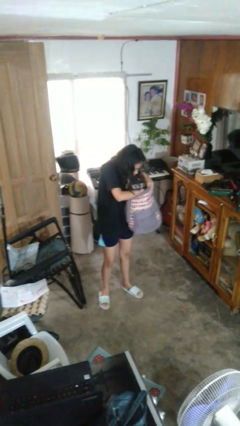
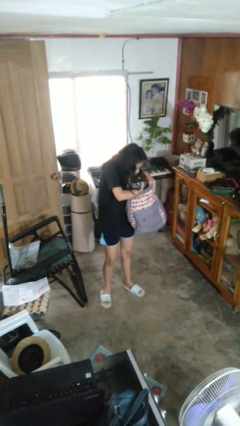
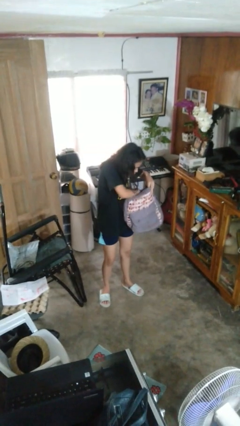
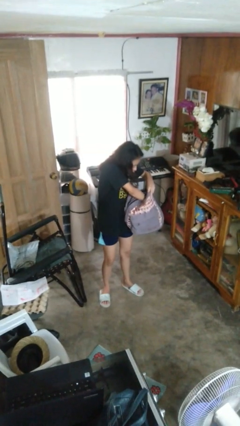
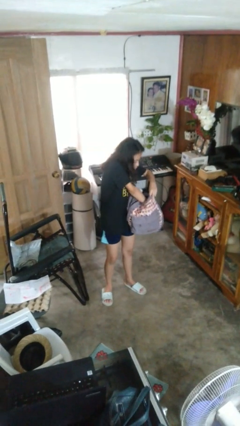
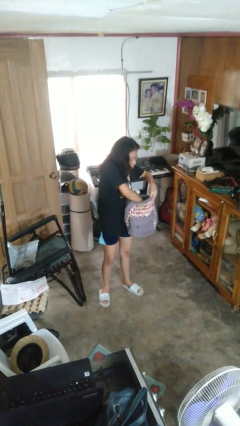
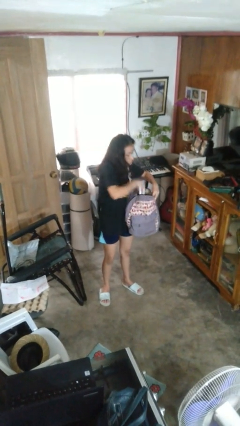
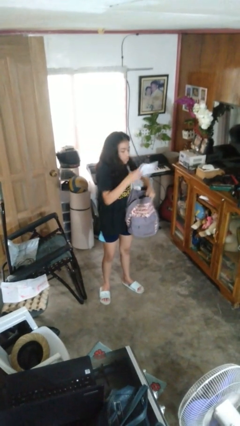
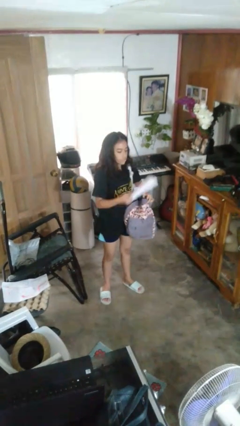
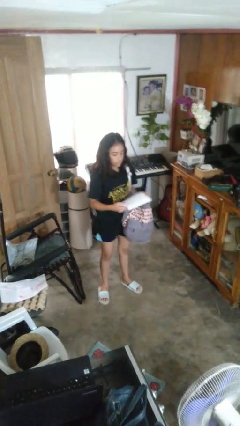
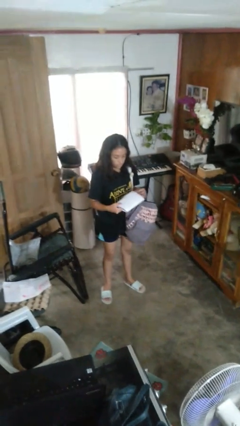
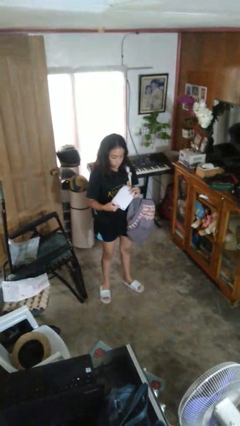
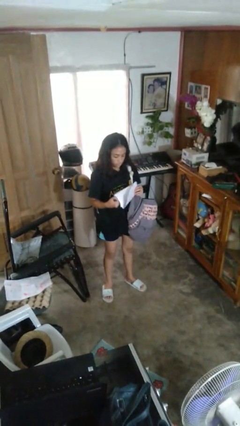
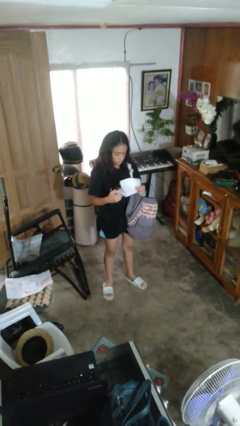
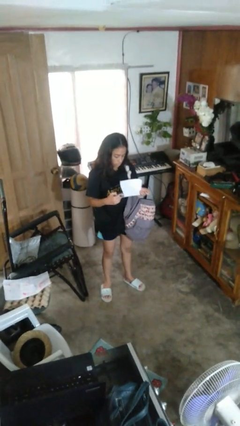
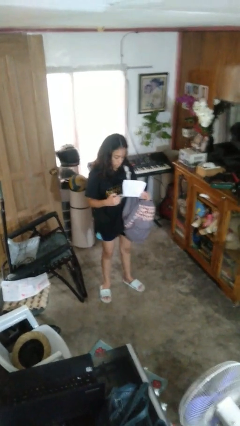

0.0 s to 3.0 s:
person takes object from backpack

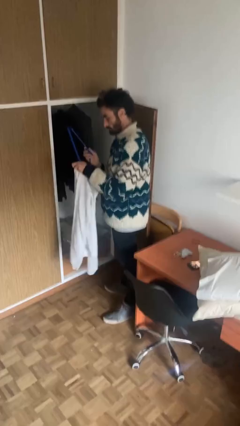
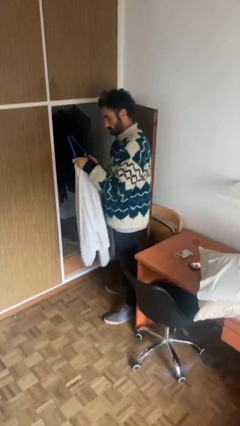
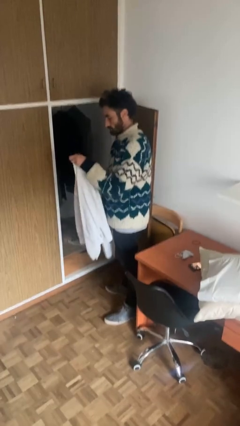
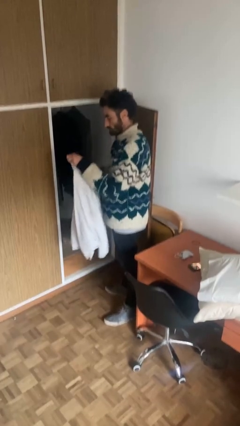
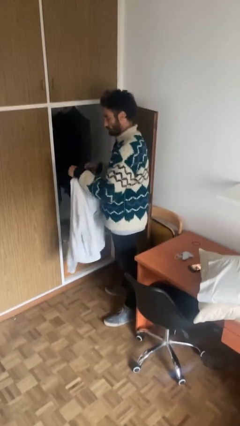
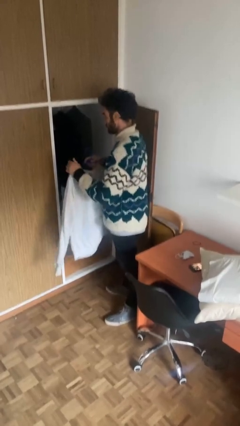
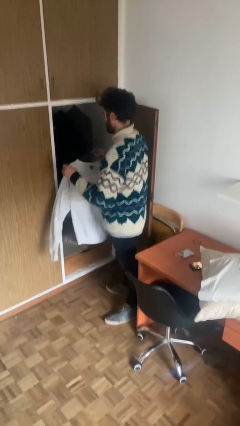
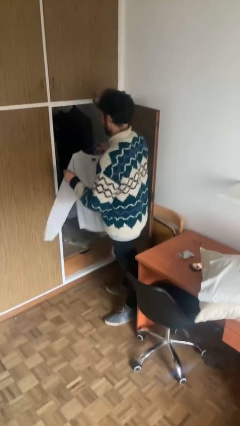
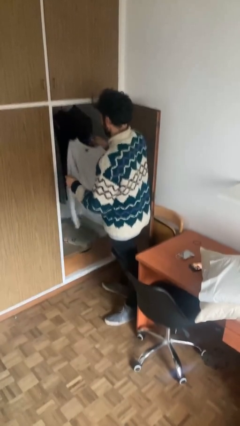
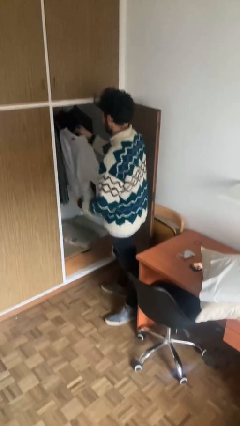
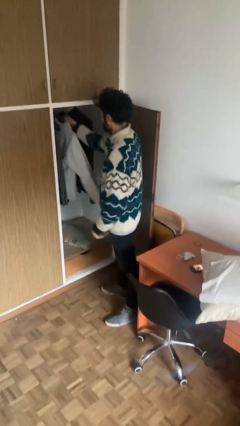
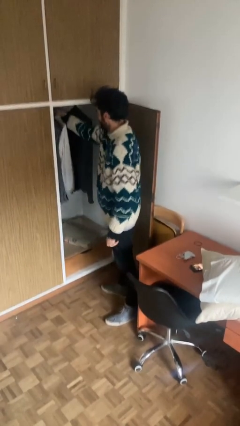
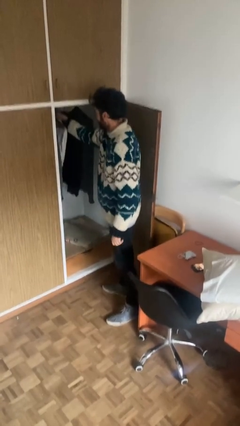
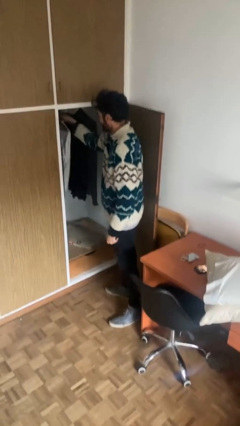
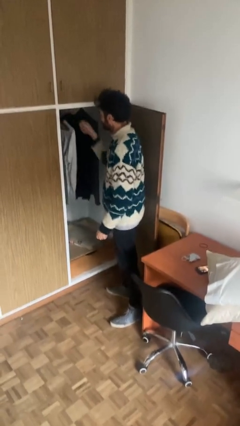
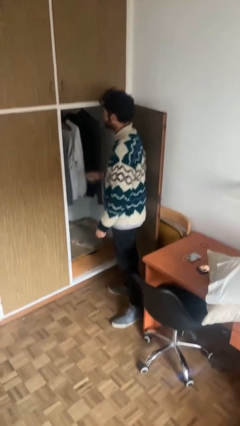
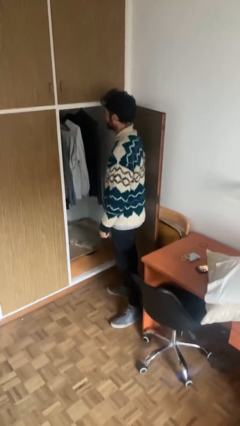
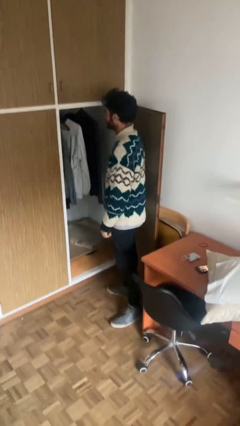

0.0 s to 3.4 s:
person puts clothes into closet

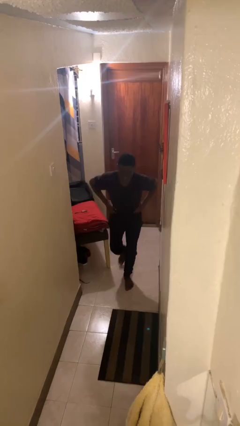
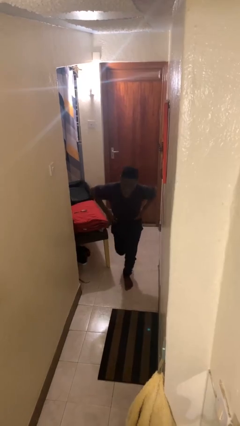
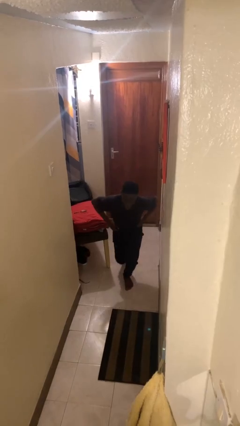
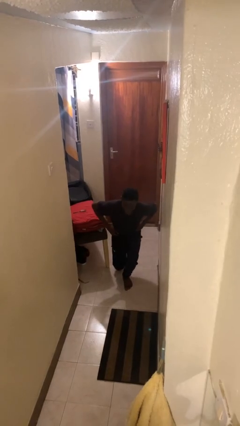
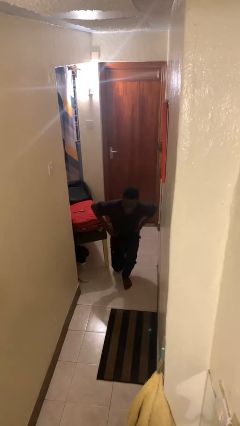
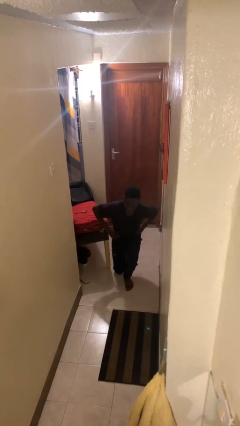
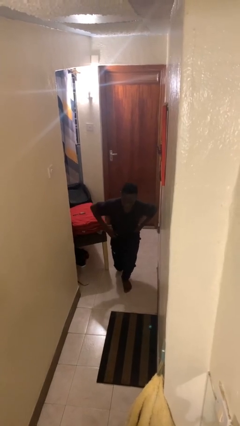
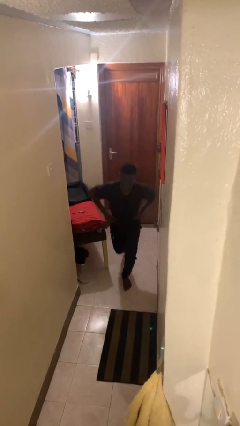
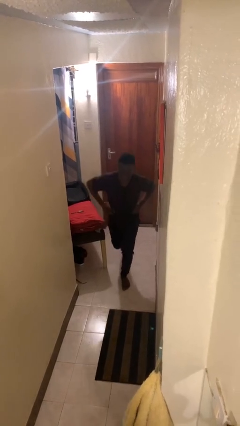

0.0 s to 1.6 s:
person exercises with lunges

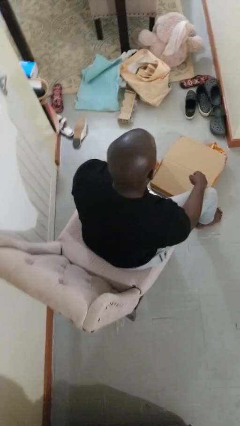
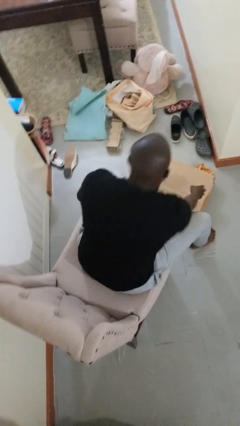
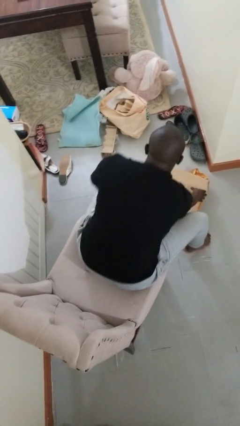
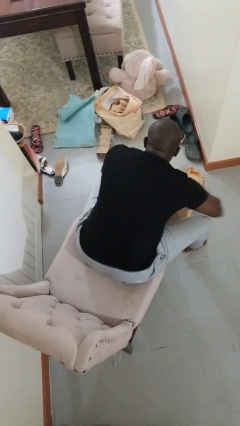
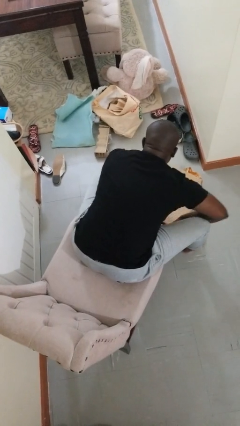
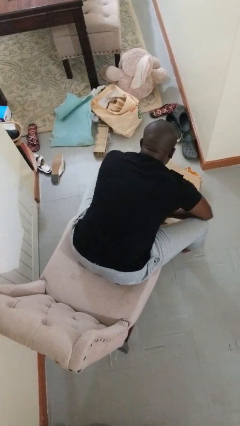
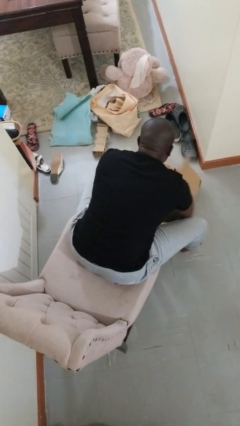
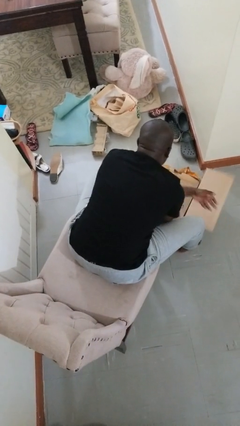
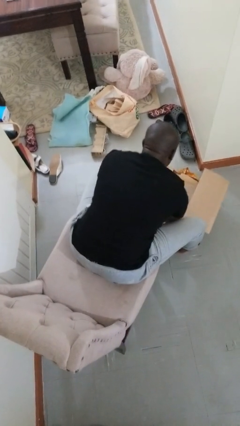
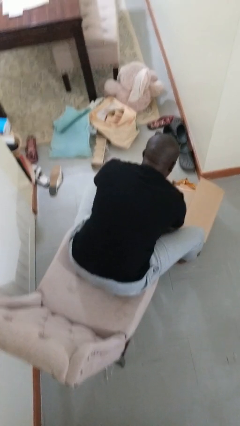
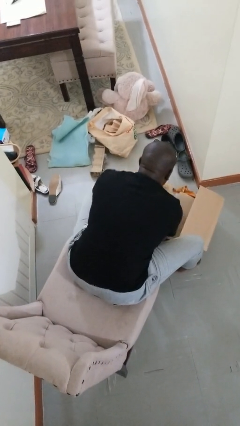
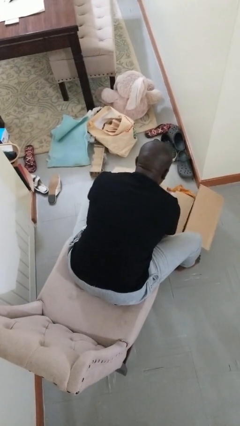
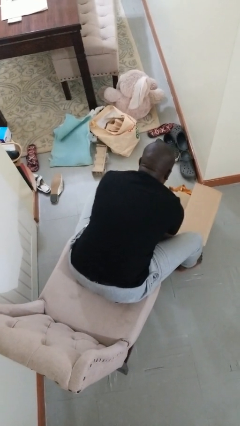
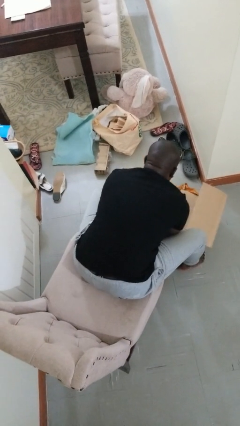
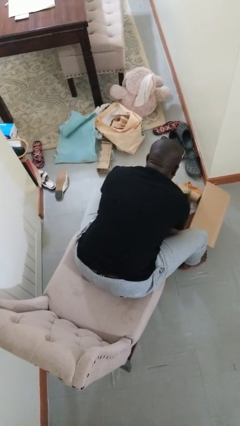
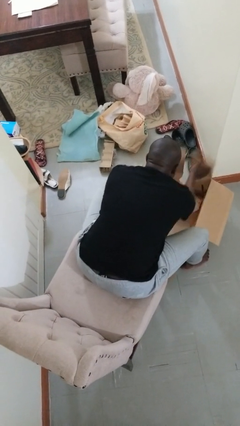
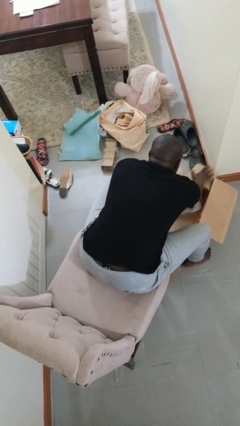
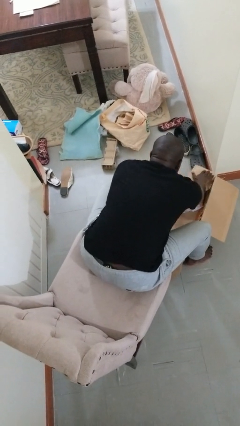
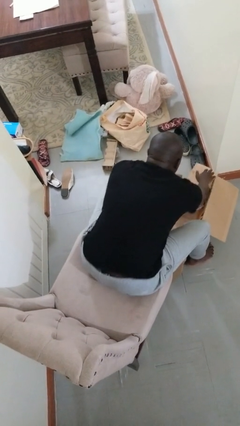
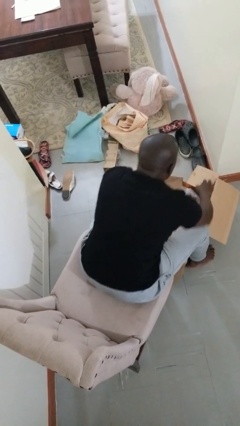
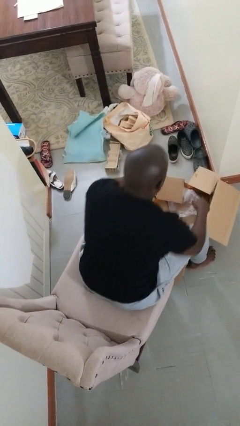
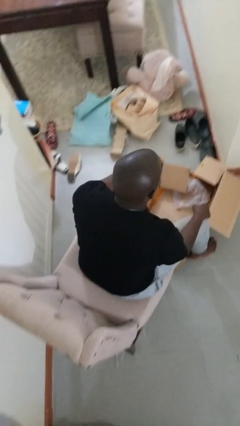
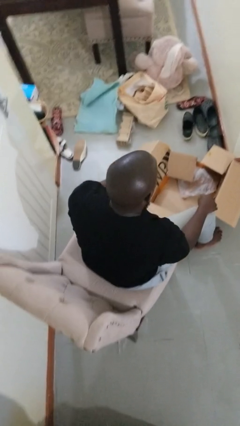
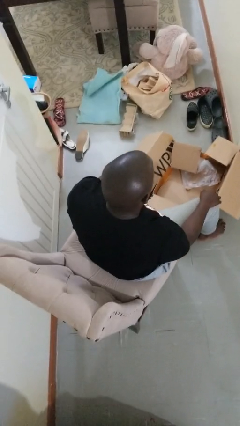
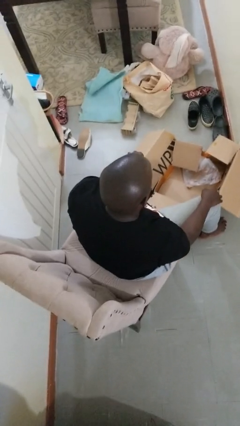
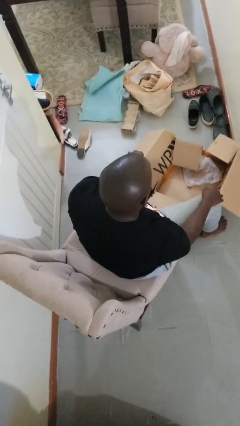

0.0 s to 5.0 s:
person opens box

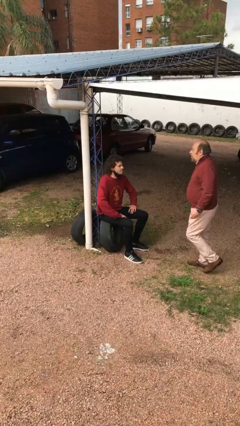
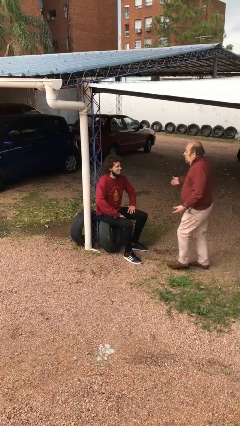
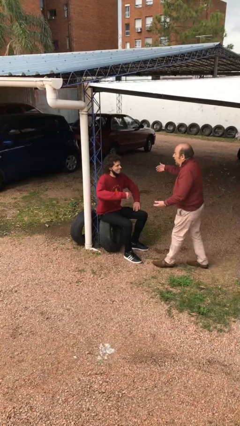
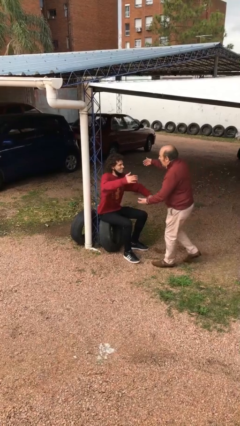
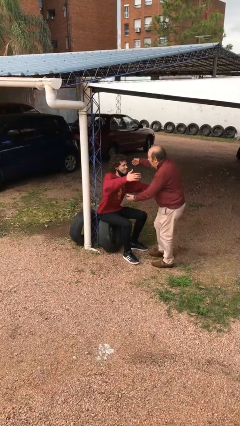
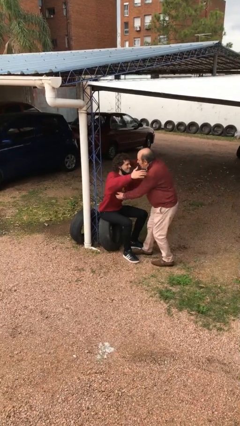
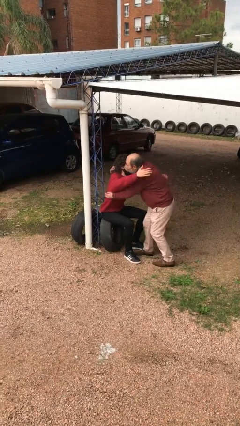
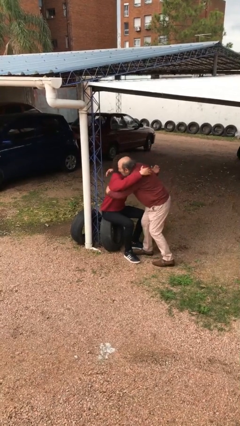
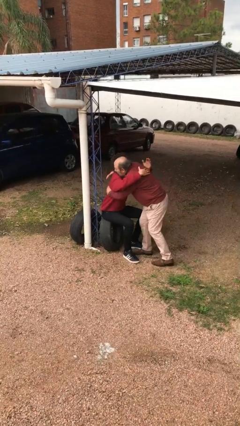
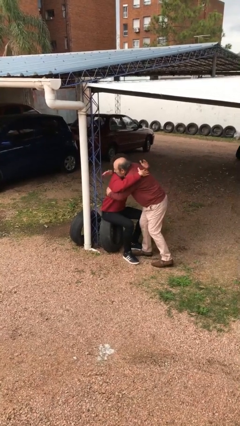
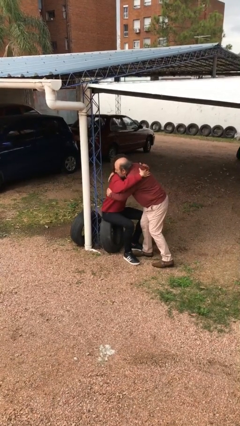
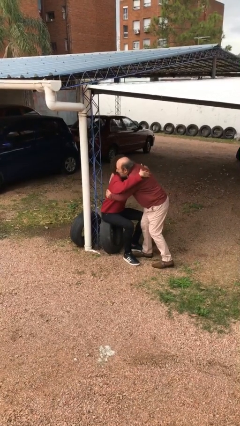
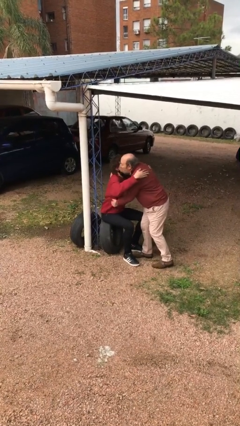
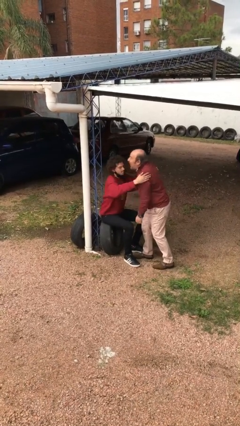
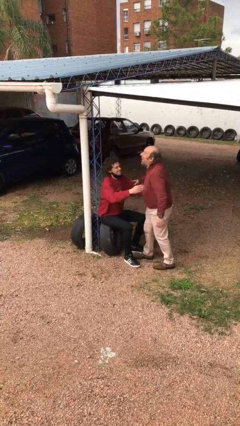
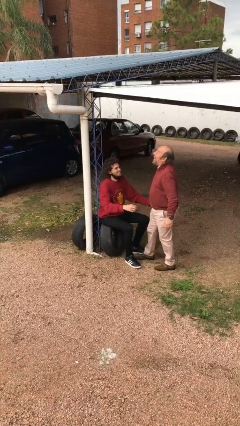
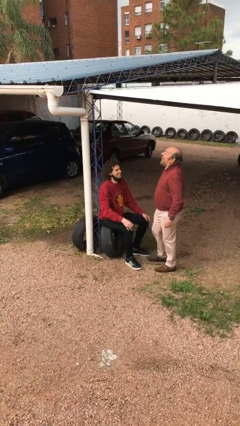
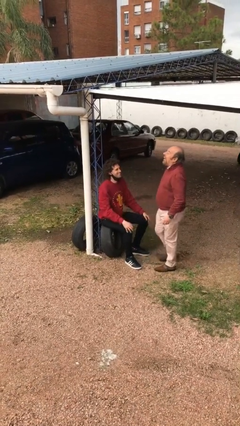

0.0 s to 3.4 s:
person embraces person

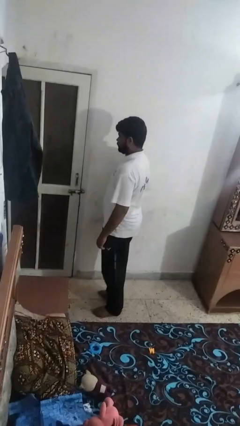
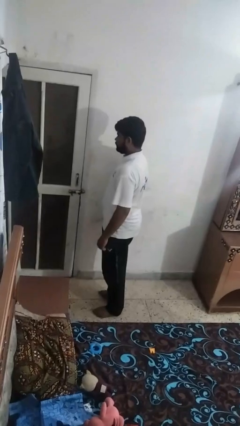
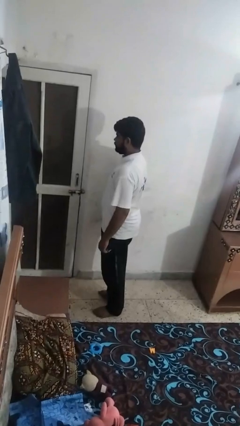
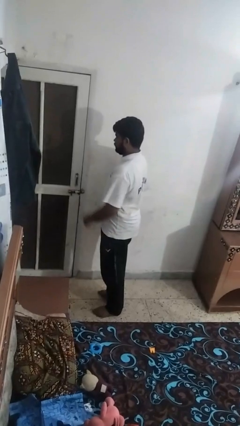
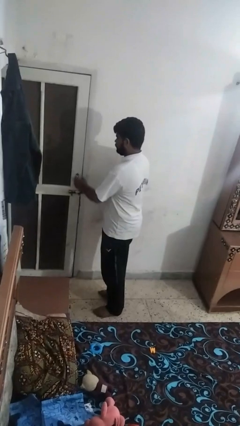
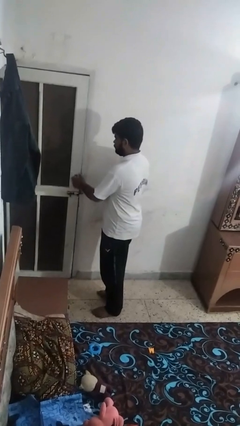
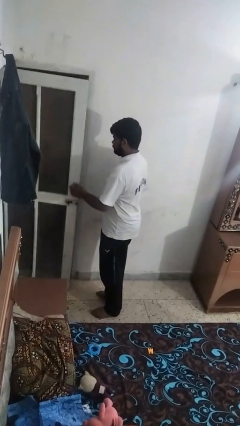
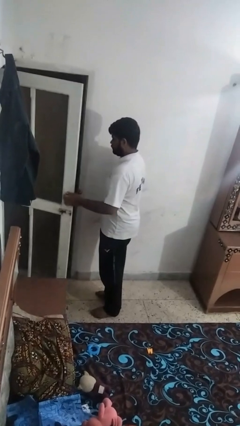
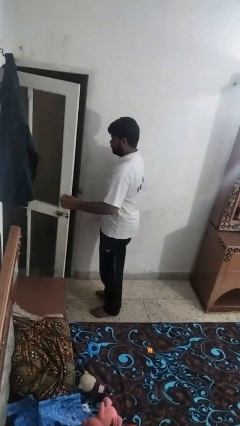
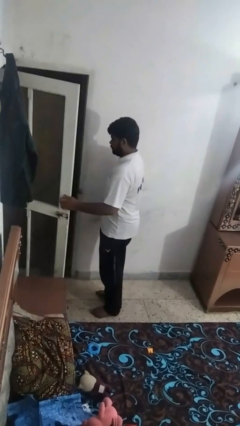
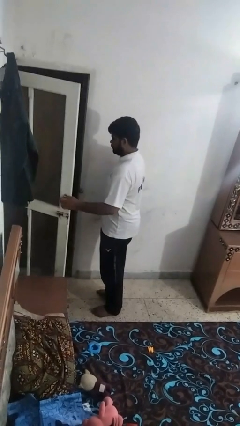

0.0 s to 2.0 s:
person opens facility door
